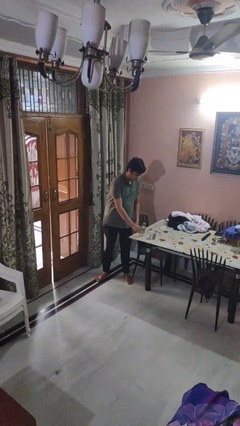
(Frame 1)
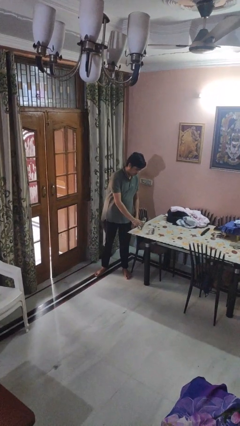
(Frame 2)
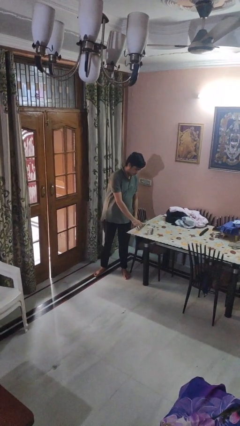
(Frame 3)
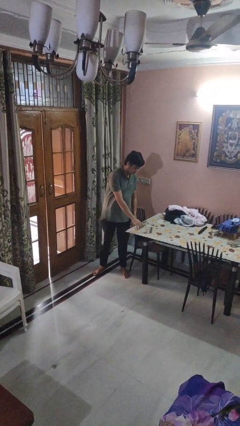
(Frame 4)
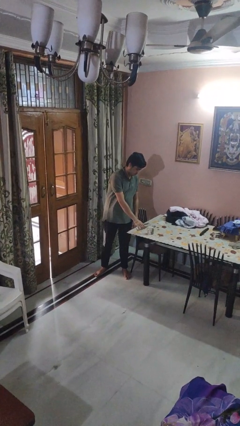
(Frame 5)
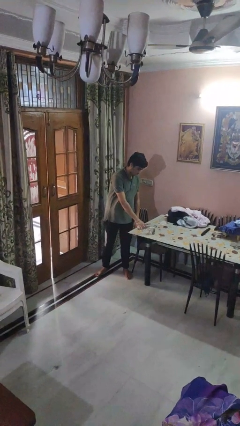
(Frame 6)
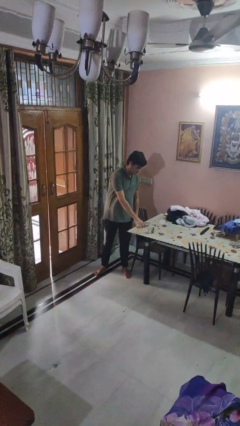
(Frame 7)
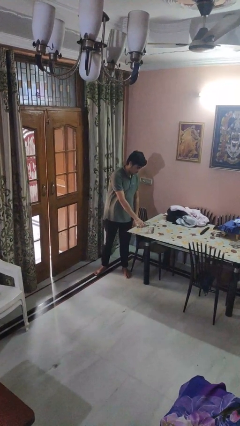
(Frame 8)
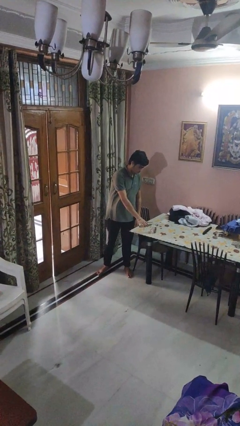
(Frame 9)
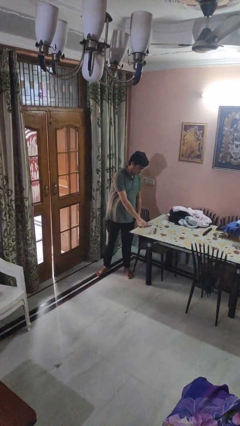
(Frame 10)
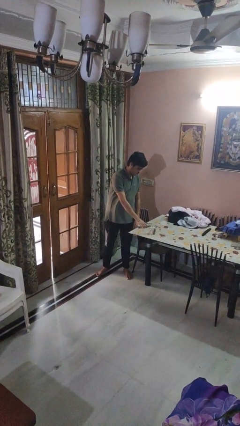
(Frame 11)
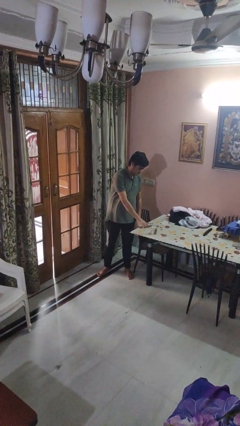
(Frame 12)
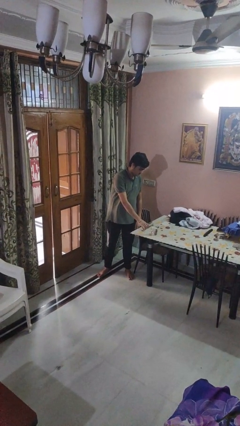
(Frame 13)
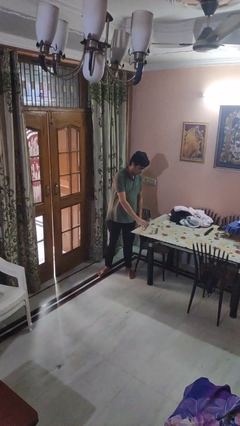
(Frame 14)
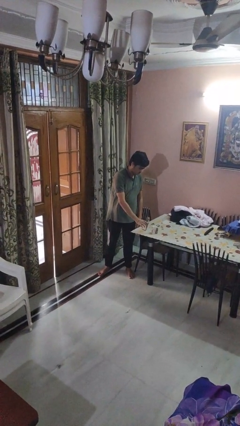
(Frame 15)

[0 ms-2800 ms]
person pours liquid into cup

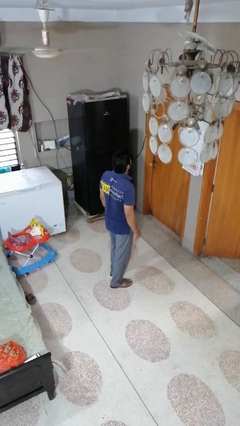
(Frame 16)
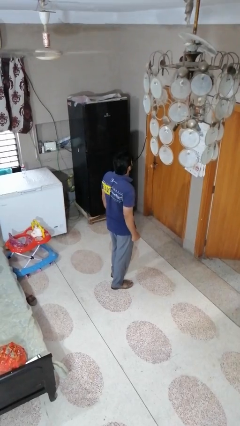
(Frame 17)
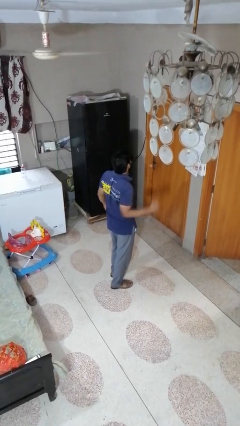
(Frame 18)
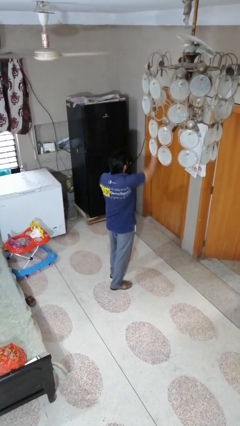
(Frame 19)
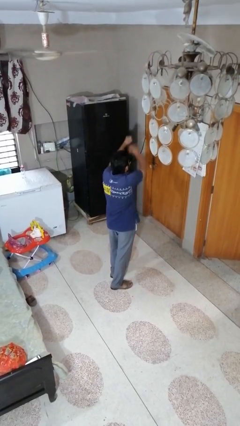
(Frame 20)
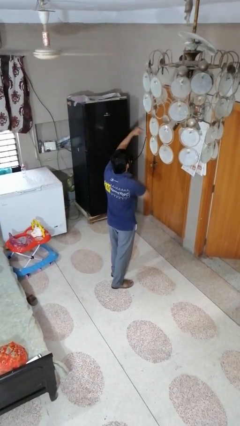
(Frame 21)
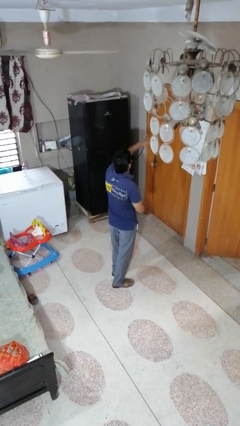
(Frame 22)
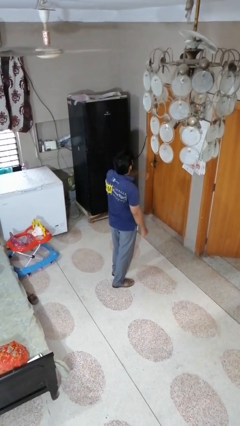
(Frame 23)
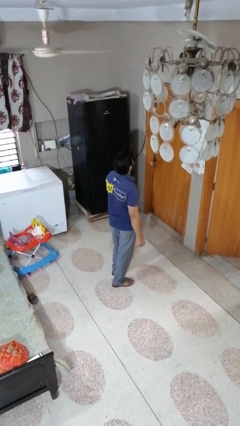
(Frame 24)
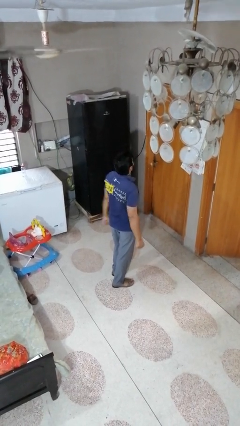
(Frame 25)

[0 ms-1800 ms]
person punches

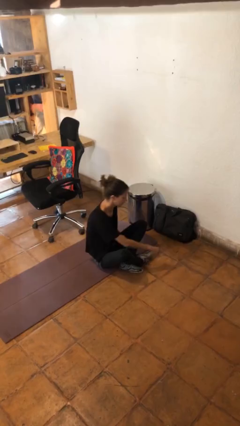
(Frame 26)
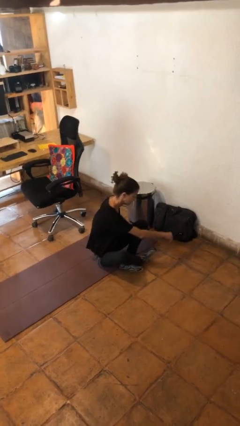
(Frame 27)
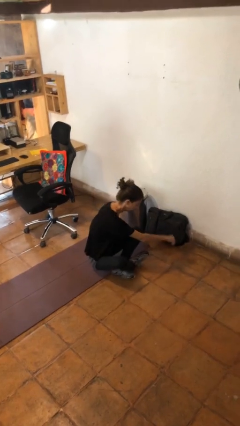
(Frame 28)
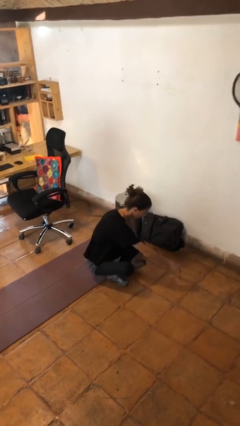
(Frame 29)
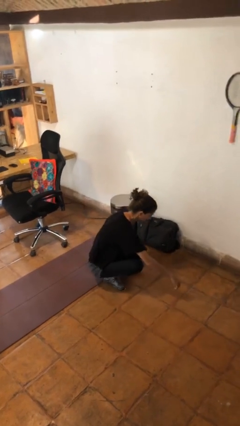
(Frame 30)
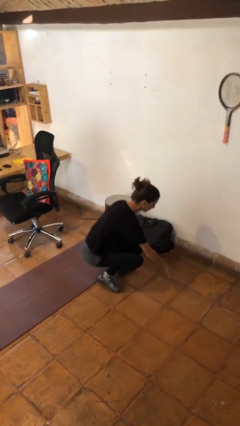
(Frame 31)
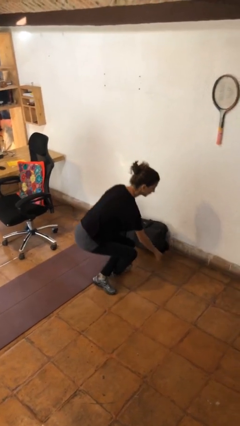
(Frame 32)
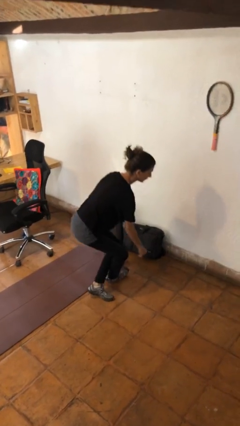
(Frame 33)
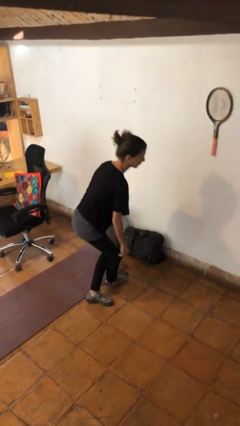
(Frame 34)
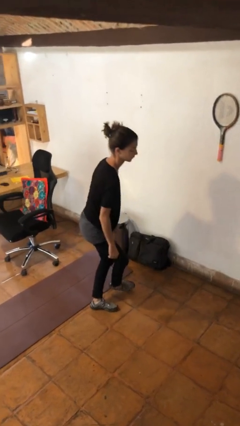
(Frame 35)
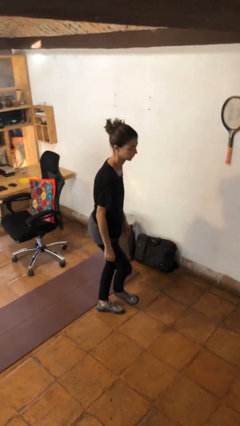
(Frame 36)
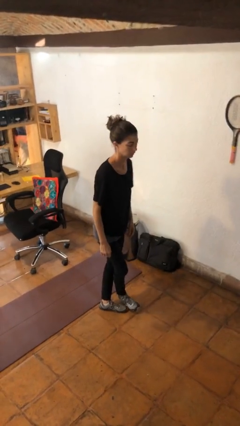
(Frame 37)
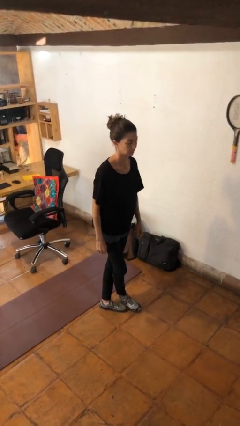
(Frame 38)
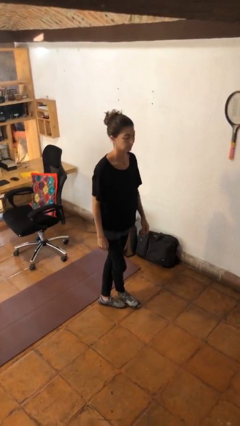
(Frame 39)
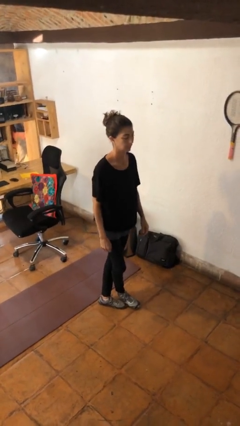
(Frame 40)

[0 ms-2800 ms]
person stands up from floor

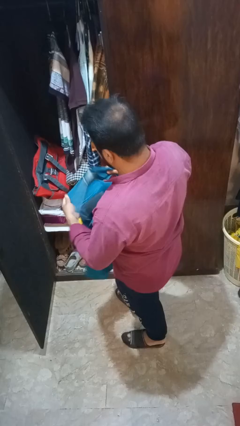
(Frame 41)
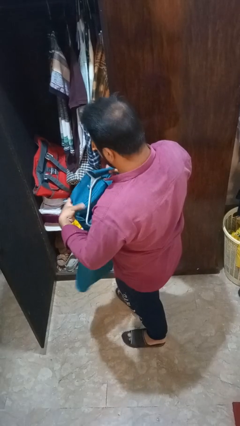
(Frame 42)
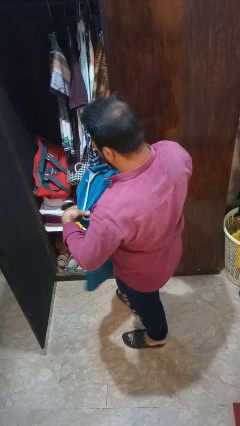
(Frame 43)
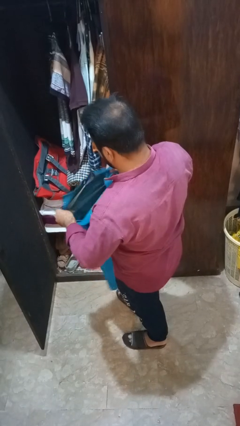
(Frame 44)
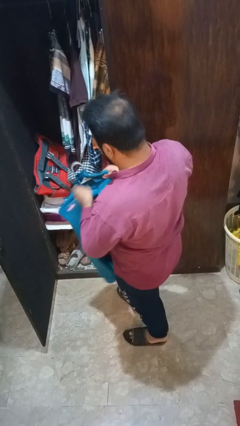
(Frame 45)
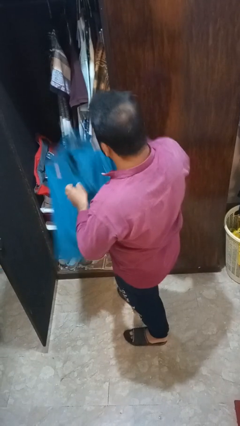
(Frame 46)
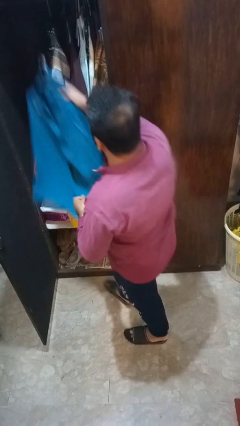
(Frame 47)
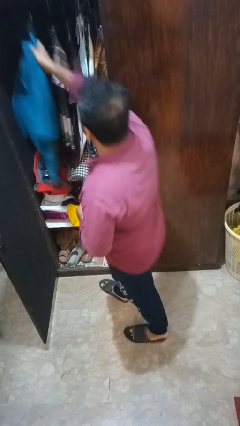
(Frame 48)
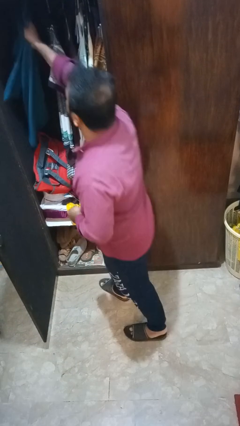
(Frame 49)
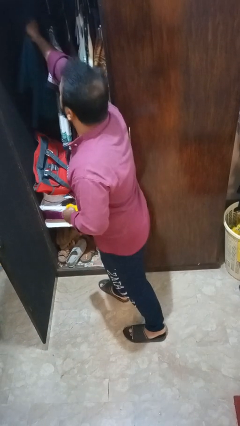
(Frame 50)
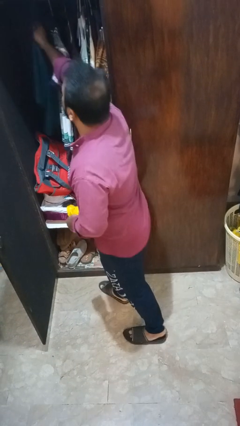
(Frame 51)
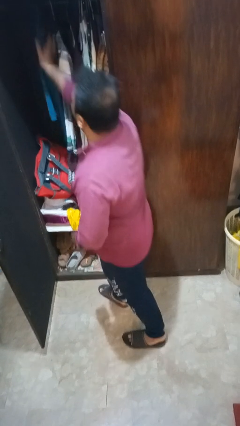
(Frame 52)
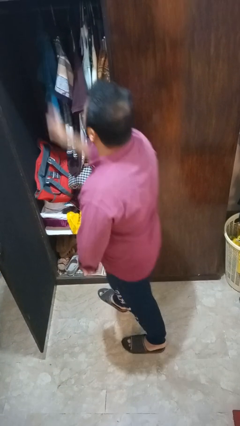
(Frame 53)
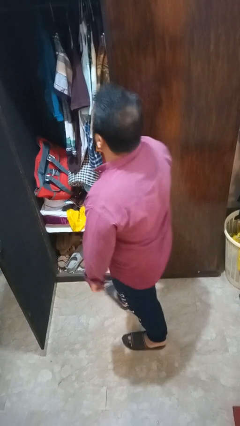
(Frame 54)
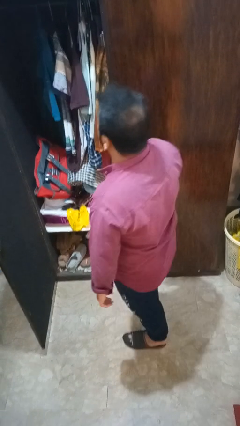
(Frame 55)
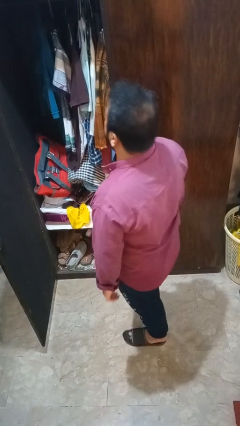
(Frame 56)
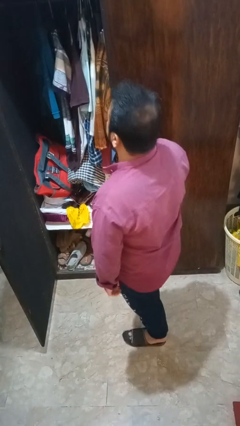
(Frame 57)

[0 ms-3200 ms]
person puts clothes into closet

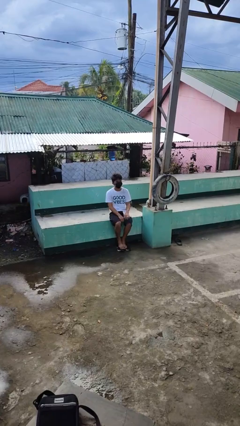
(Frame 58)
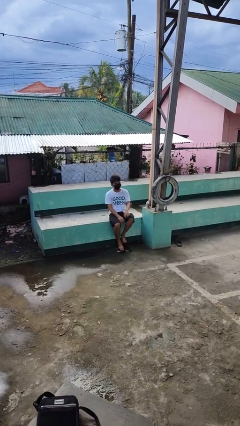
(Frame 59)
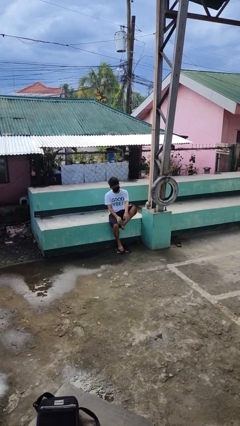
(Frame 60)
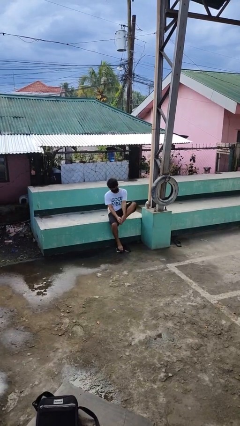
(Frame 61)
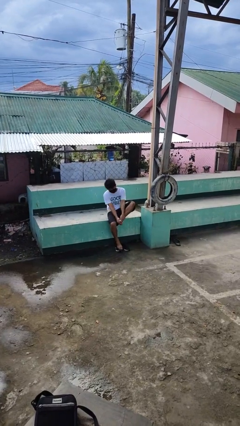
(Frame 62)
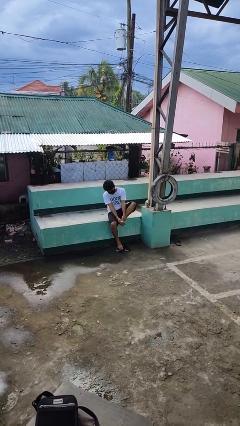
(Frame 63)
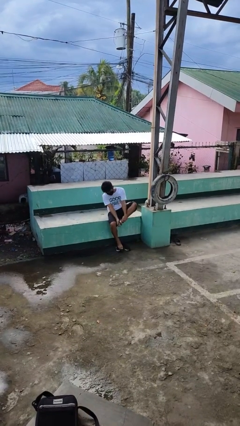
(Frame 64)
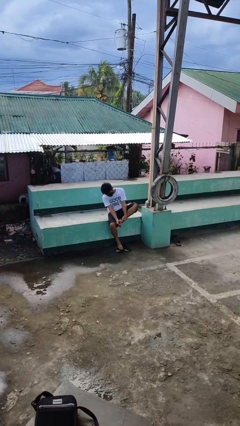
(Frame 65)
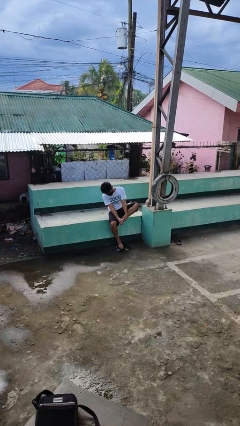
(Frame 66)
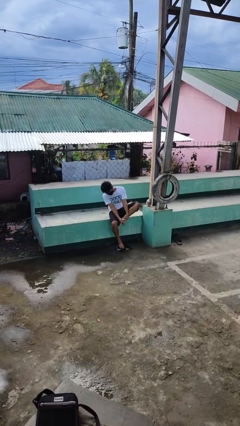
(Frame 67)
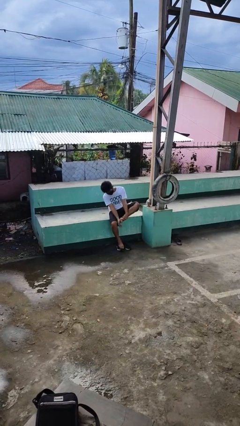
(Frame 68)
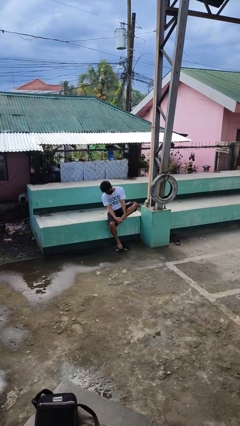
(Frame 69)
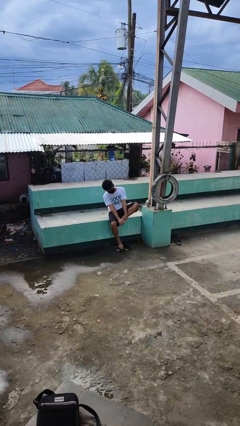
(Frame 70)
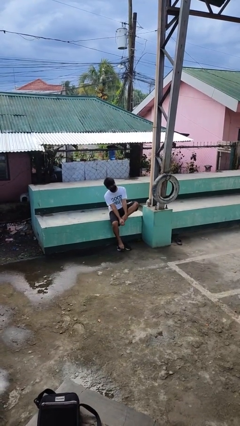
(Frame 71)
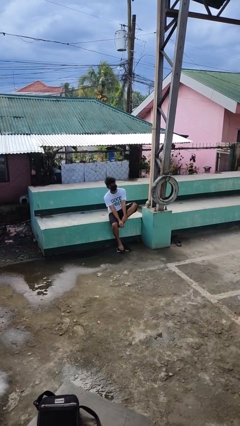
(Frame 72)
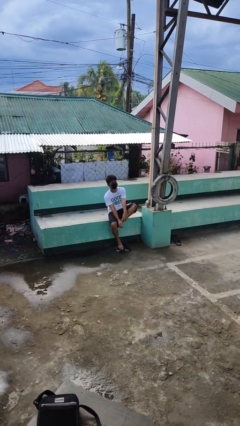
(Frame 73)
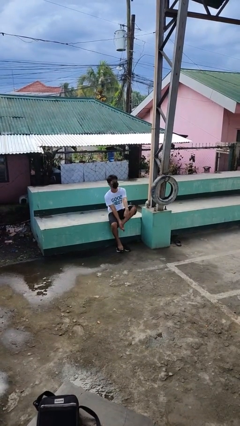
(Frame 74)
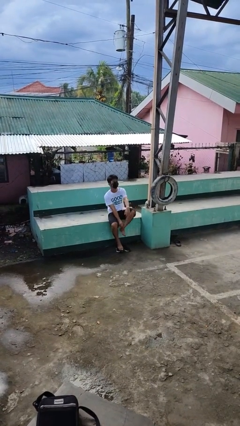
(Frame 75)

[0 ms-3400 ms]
person rubs foot

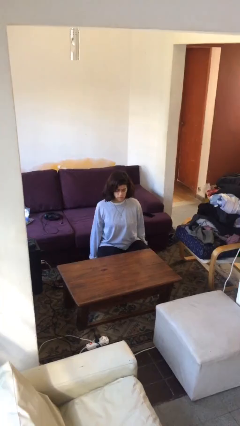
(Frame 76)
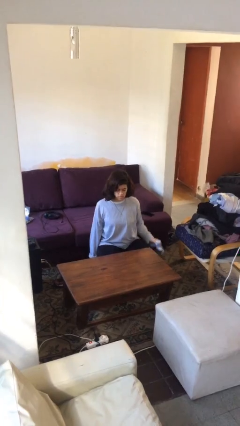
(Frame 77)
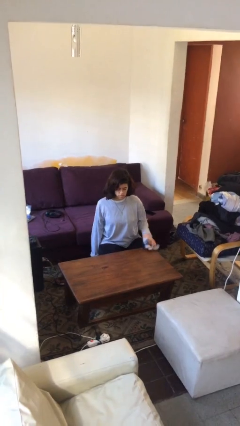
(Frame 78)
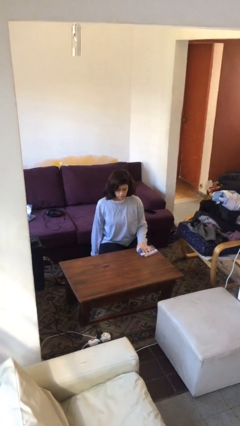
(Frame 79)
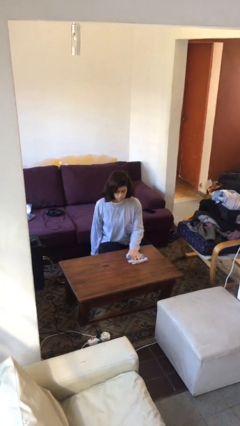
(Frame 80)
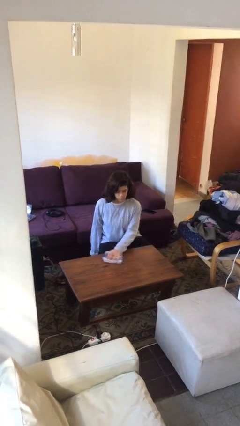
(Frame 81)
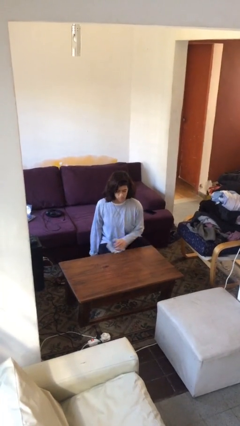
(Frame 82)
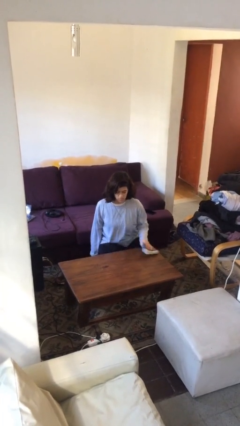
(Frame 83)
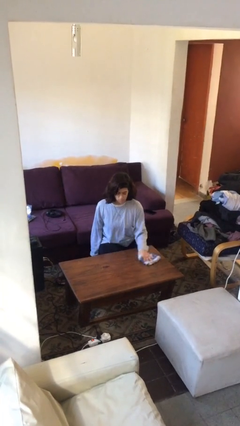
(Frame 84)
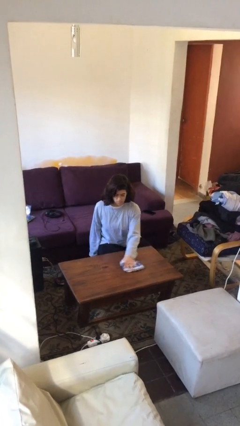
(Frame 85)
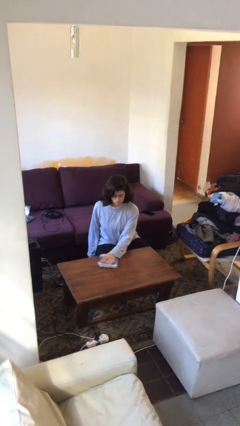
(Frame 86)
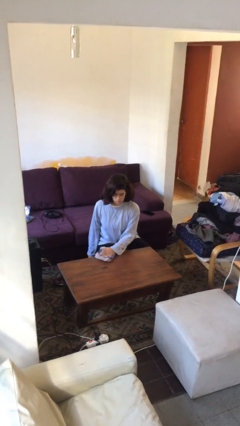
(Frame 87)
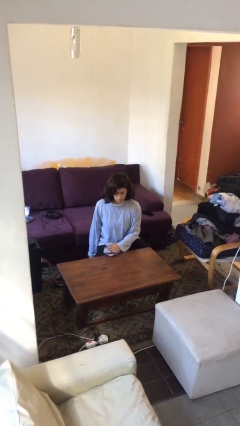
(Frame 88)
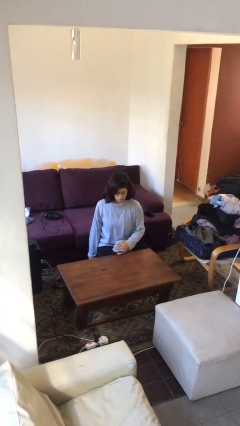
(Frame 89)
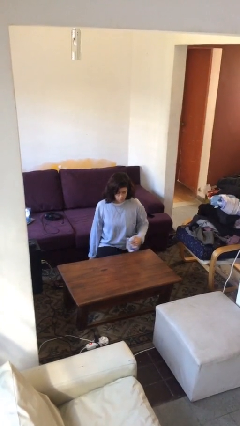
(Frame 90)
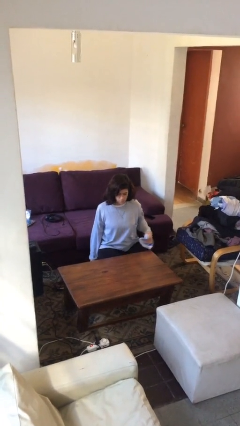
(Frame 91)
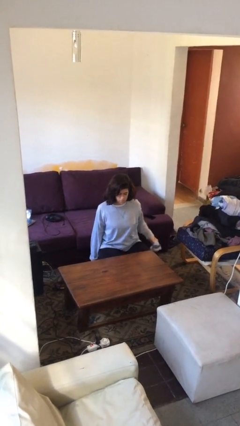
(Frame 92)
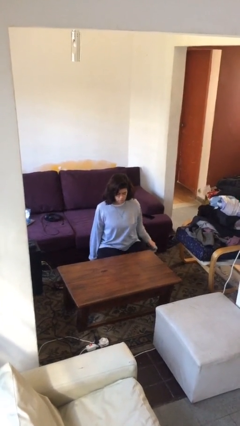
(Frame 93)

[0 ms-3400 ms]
person cleans table with rag
